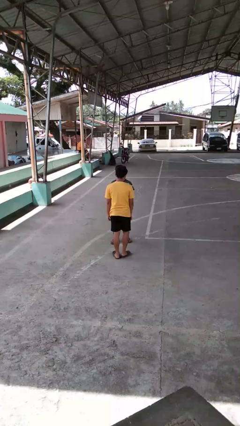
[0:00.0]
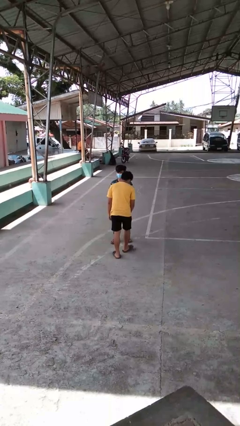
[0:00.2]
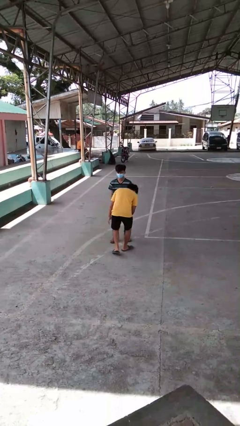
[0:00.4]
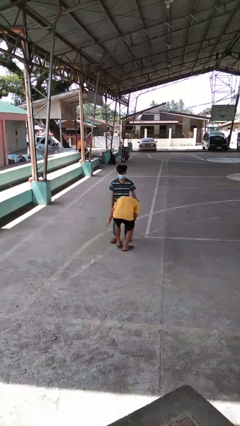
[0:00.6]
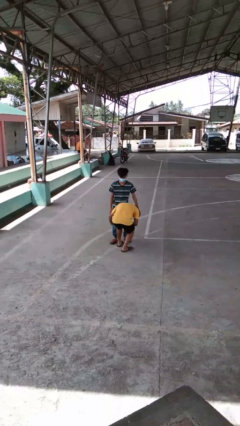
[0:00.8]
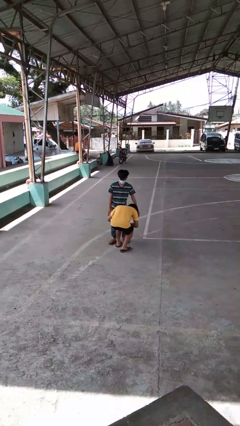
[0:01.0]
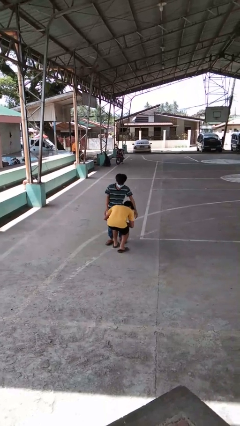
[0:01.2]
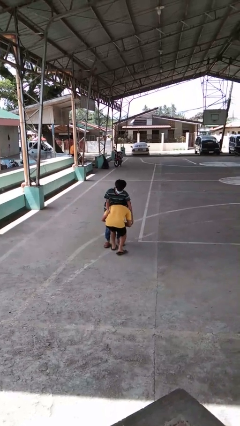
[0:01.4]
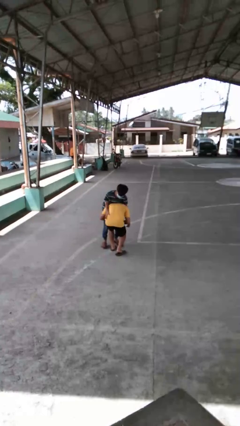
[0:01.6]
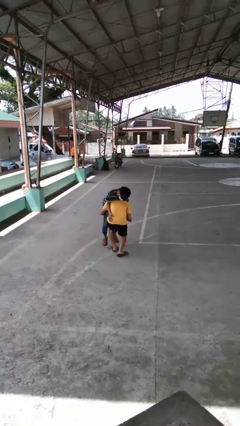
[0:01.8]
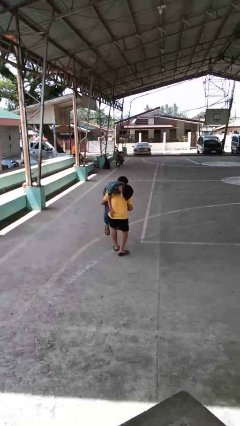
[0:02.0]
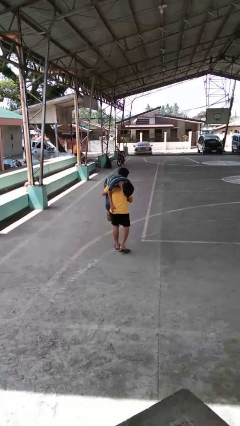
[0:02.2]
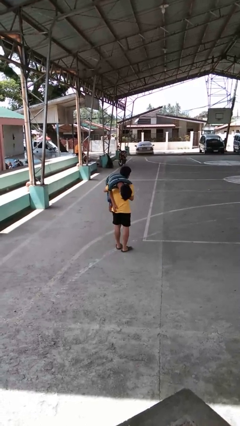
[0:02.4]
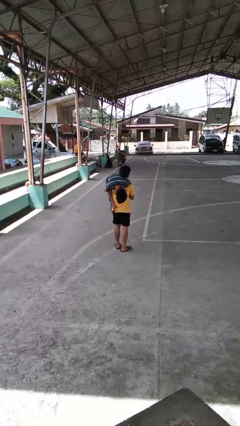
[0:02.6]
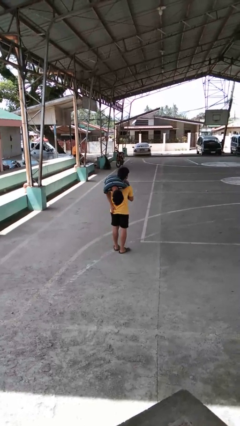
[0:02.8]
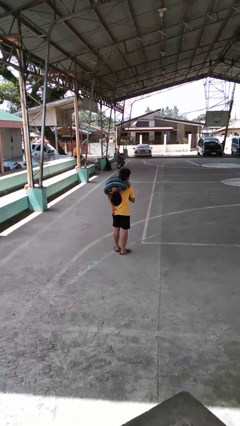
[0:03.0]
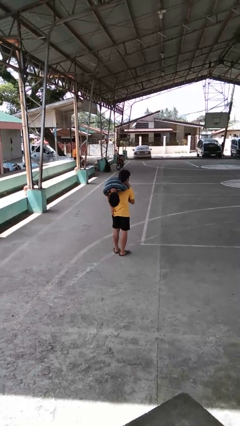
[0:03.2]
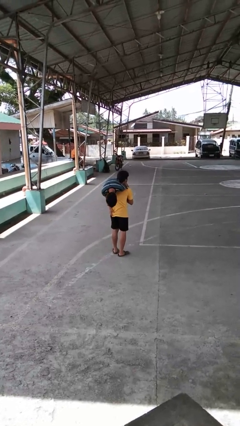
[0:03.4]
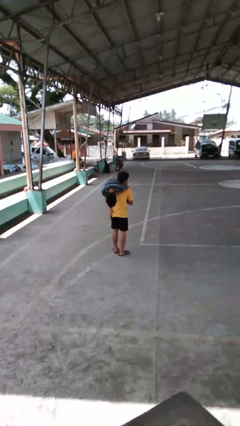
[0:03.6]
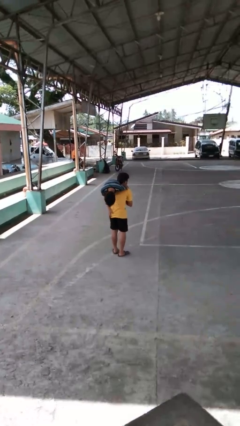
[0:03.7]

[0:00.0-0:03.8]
person carries person over shoulder

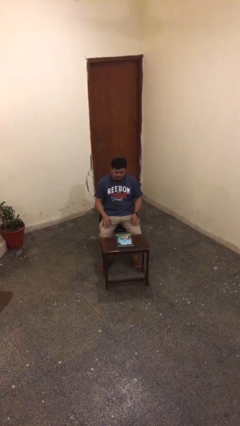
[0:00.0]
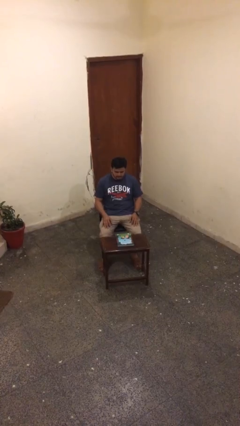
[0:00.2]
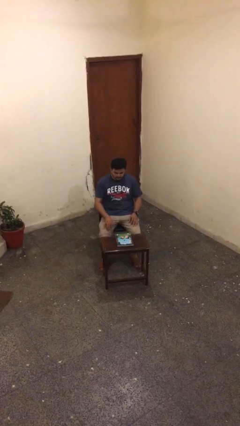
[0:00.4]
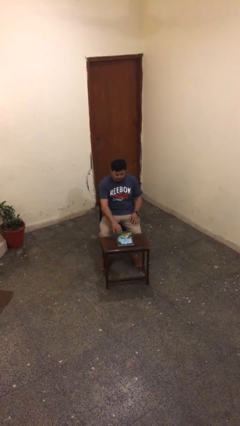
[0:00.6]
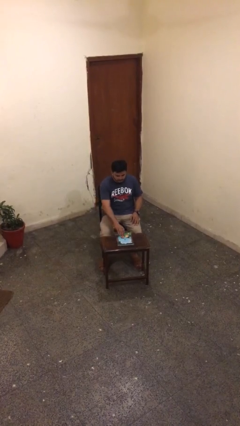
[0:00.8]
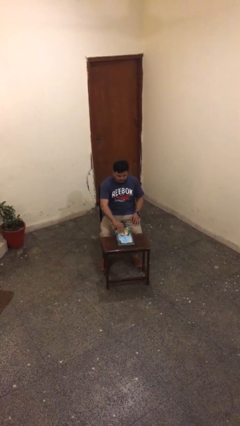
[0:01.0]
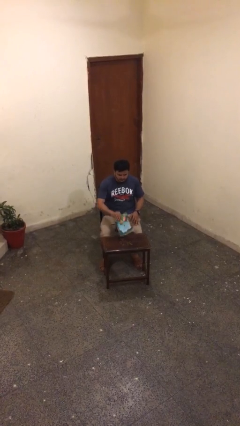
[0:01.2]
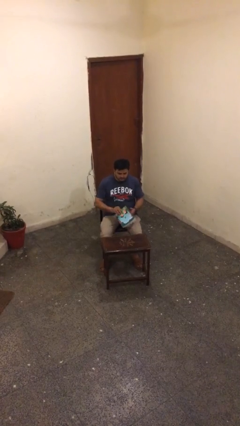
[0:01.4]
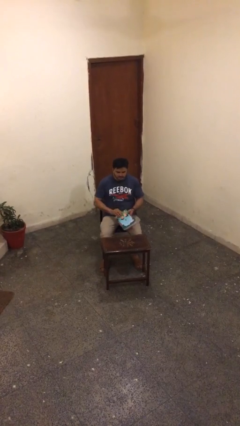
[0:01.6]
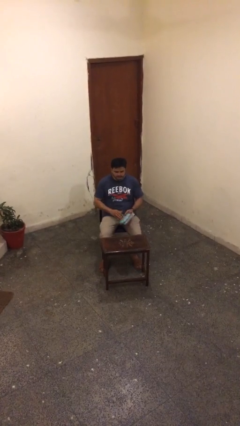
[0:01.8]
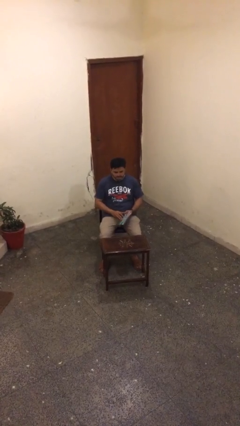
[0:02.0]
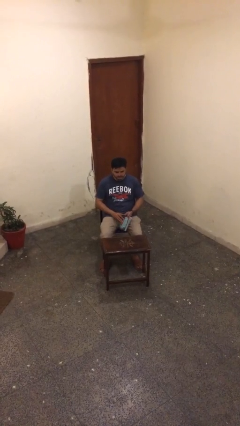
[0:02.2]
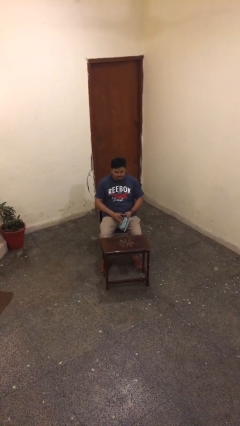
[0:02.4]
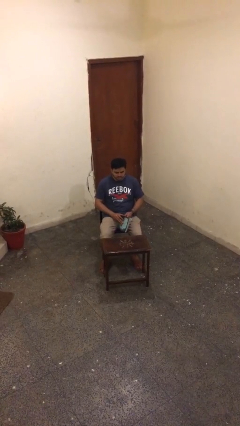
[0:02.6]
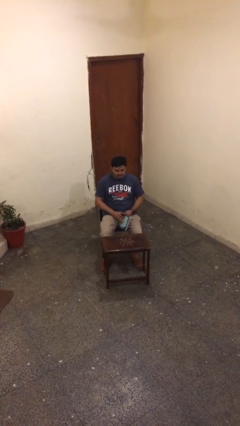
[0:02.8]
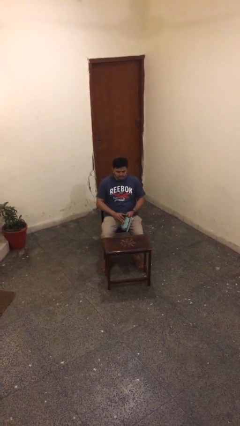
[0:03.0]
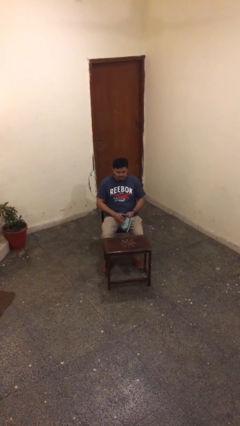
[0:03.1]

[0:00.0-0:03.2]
person picks up object from table

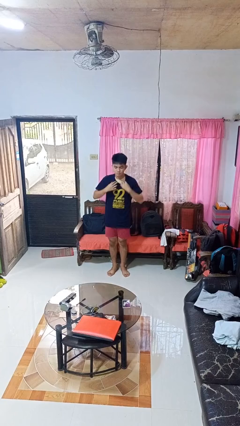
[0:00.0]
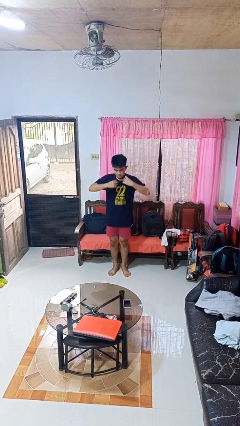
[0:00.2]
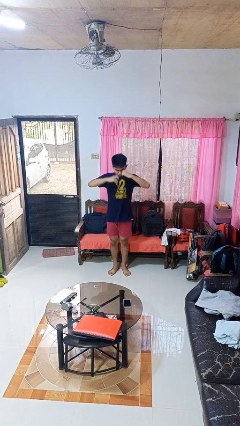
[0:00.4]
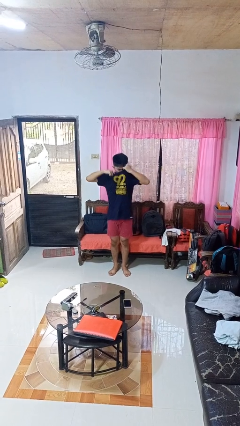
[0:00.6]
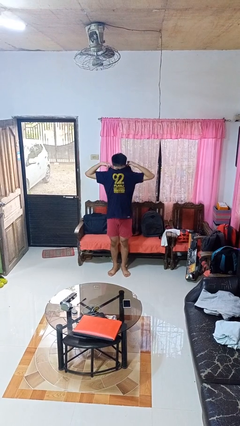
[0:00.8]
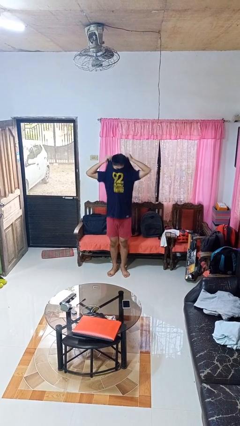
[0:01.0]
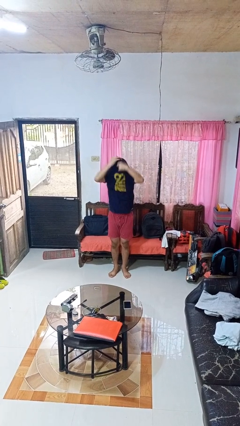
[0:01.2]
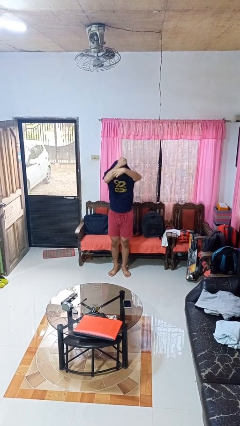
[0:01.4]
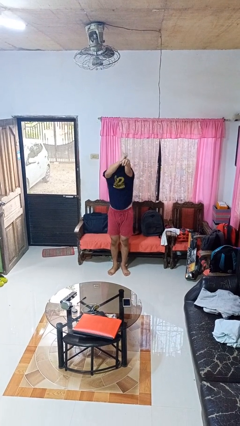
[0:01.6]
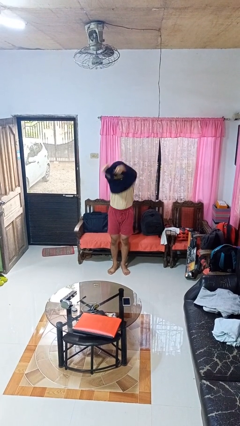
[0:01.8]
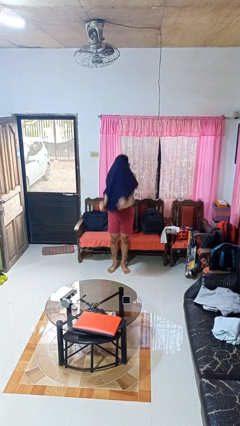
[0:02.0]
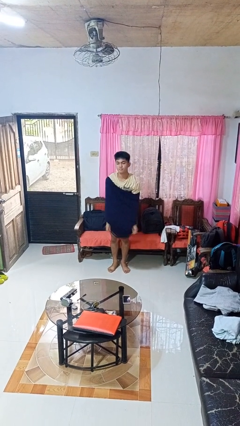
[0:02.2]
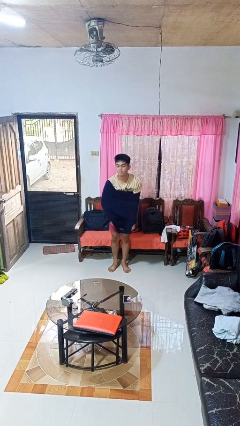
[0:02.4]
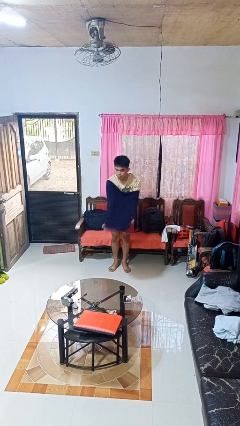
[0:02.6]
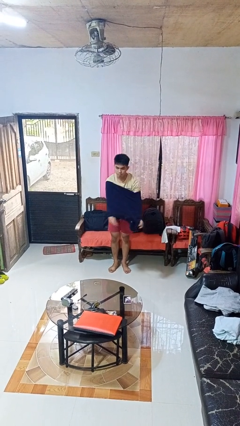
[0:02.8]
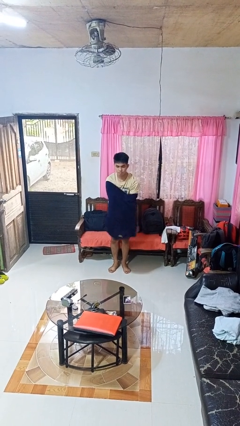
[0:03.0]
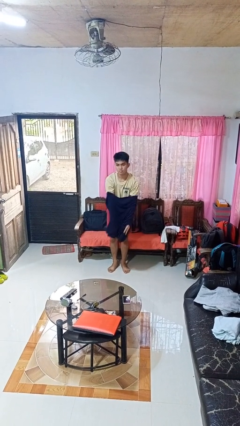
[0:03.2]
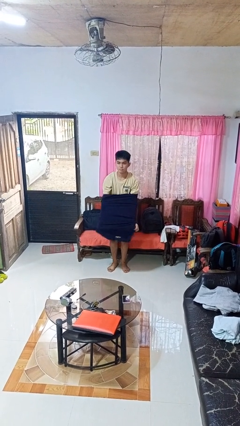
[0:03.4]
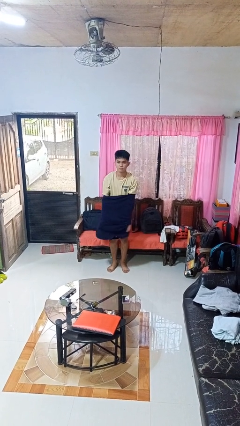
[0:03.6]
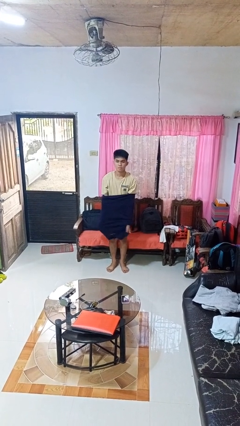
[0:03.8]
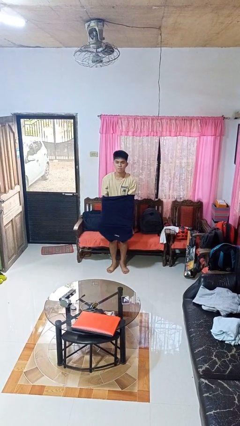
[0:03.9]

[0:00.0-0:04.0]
person takes off shirt

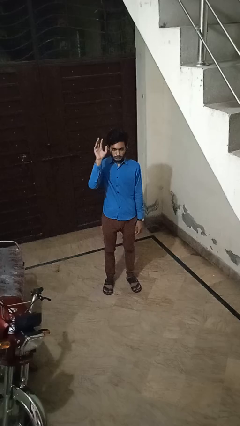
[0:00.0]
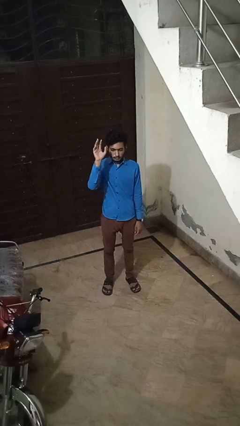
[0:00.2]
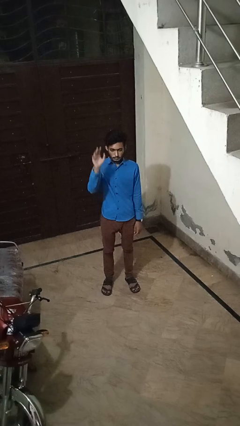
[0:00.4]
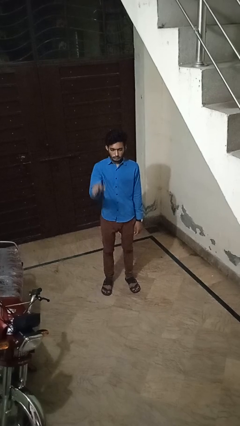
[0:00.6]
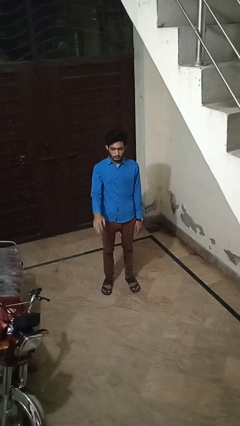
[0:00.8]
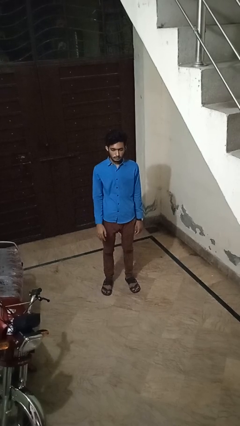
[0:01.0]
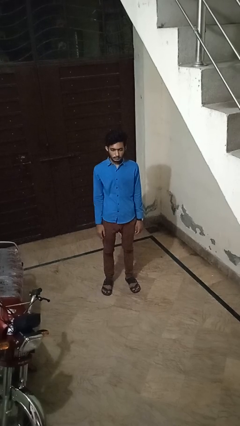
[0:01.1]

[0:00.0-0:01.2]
person gestures lower hand

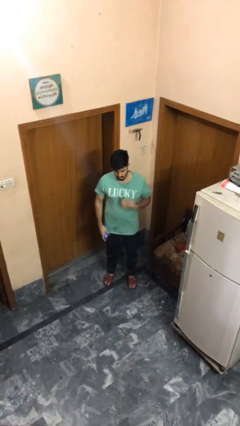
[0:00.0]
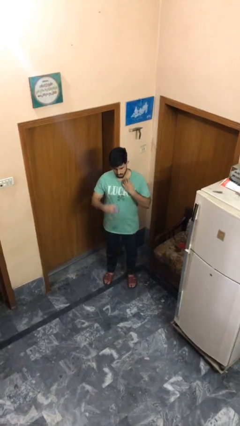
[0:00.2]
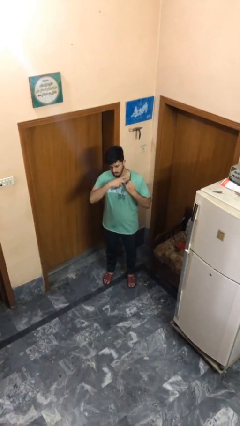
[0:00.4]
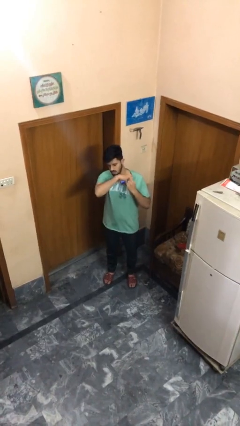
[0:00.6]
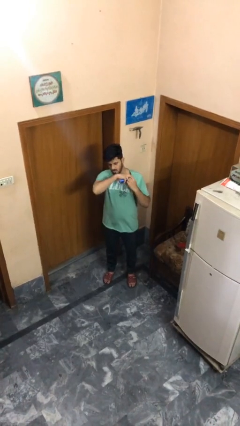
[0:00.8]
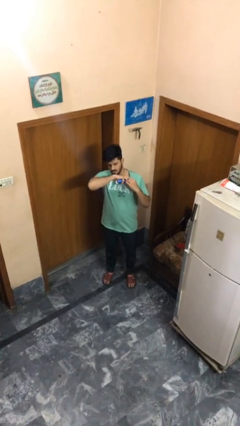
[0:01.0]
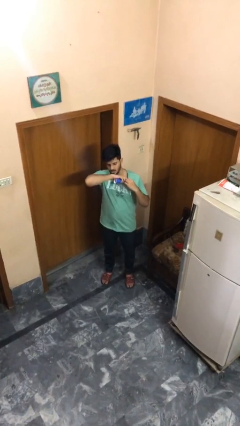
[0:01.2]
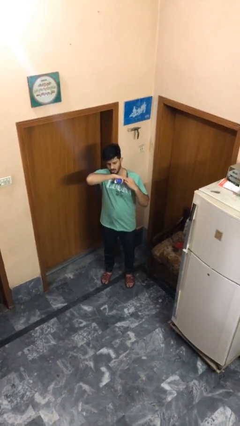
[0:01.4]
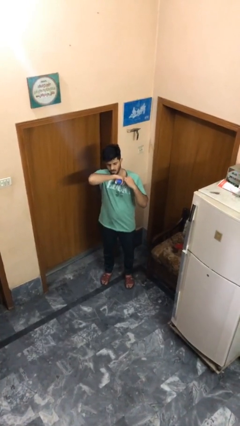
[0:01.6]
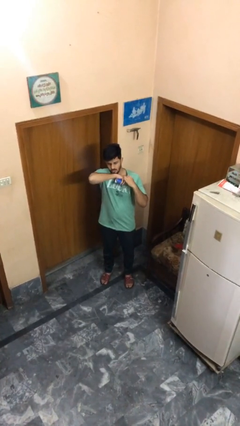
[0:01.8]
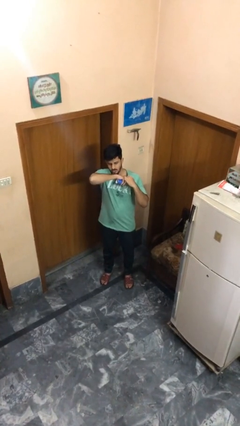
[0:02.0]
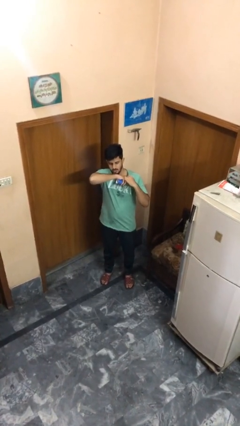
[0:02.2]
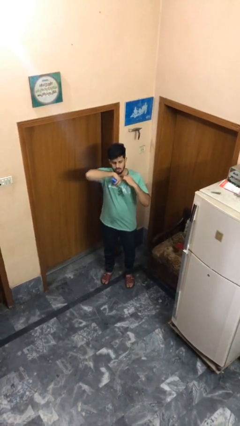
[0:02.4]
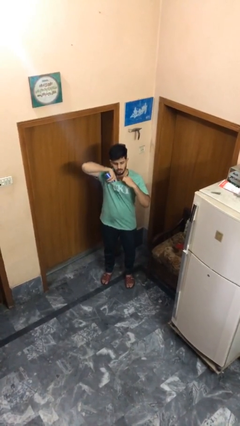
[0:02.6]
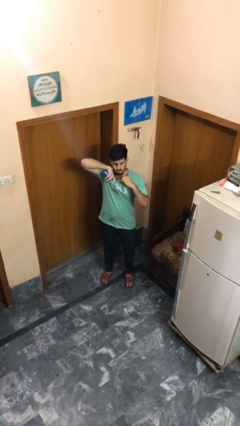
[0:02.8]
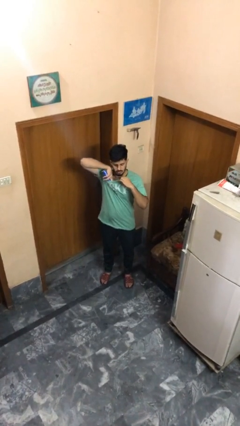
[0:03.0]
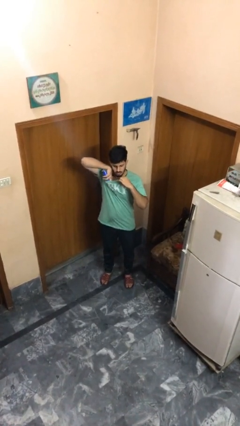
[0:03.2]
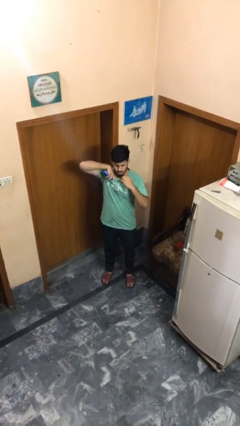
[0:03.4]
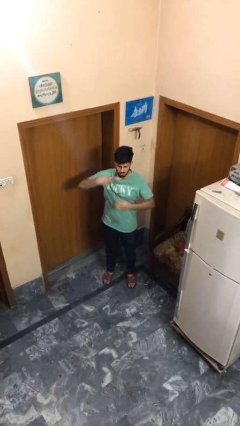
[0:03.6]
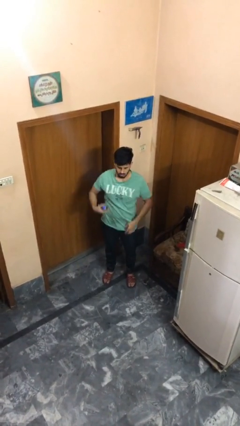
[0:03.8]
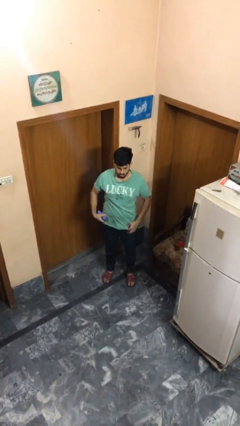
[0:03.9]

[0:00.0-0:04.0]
person applies deodorant

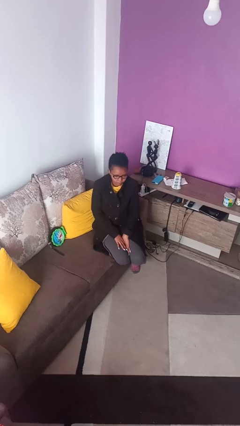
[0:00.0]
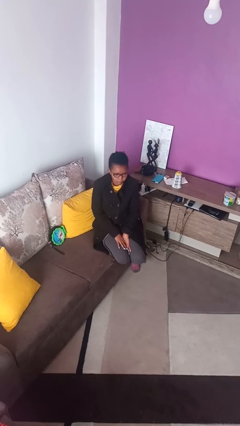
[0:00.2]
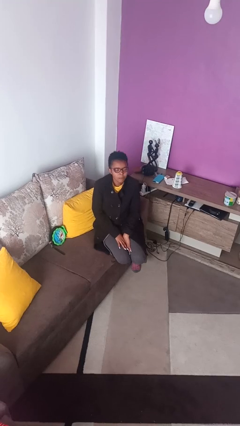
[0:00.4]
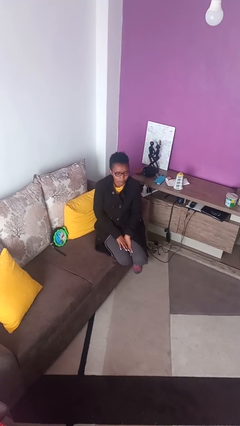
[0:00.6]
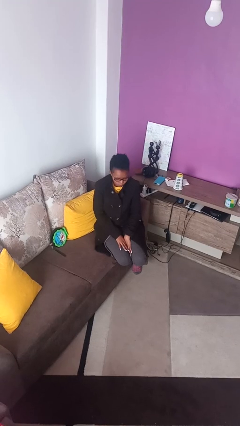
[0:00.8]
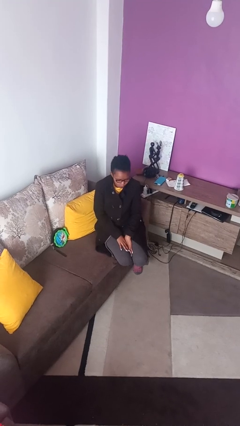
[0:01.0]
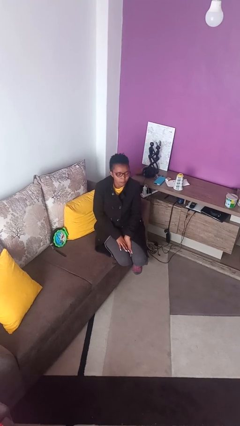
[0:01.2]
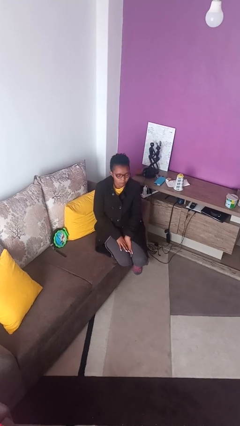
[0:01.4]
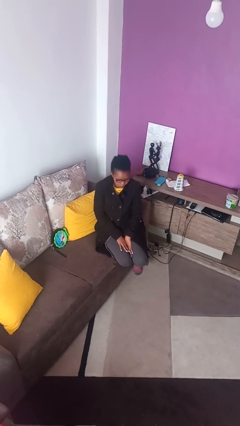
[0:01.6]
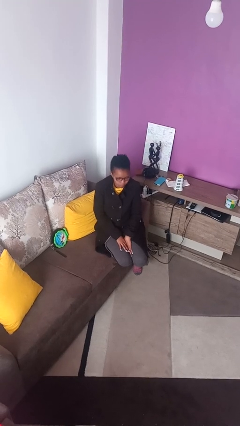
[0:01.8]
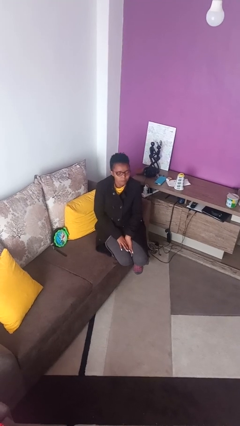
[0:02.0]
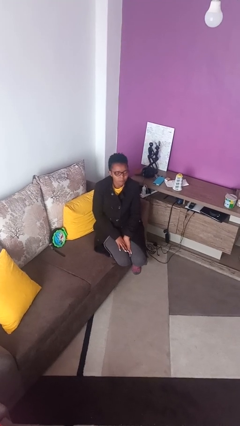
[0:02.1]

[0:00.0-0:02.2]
person nods head
